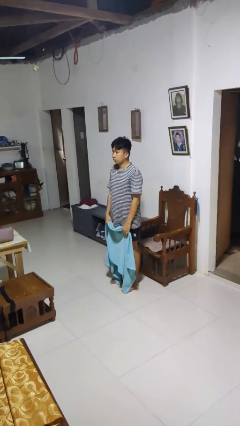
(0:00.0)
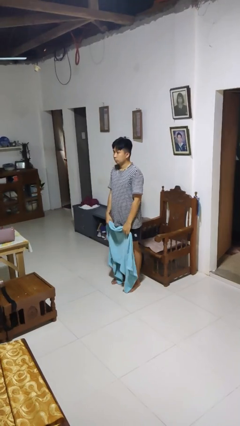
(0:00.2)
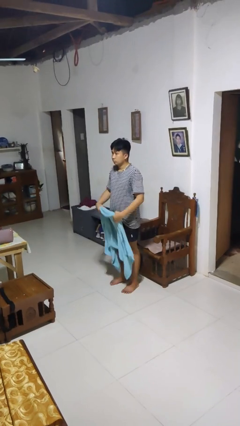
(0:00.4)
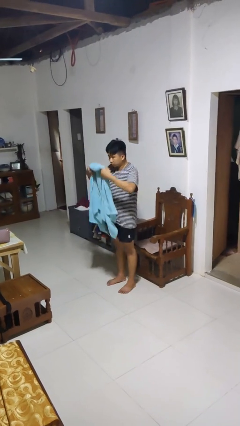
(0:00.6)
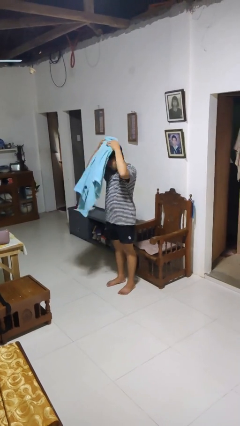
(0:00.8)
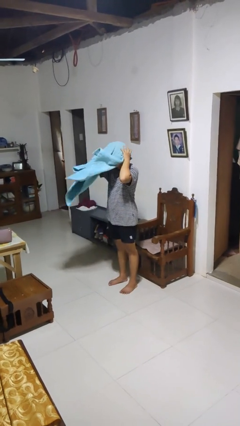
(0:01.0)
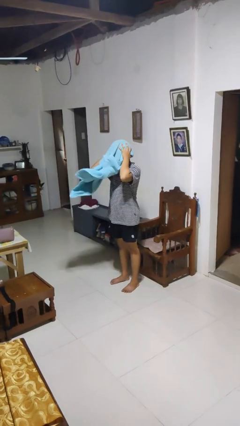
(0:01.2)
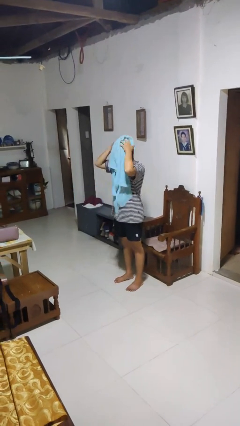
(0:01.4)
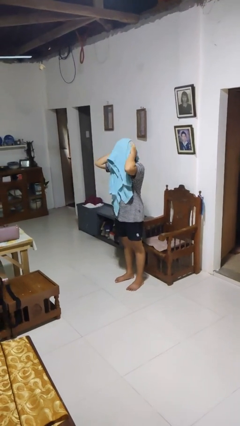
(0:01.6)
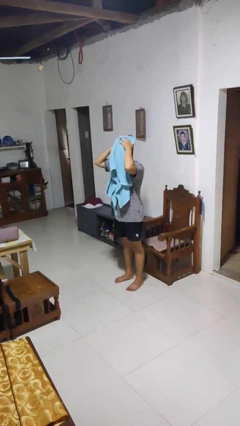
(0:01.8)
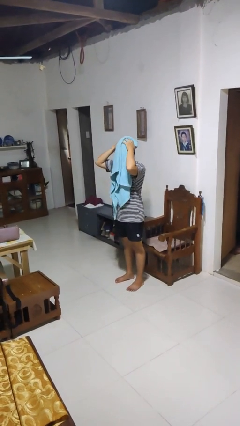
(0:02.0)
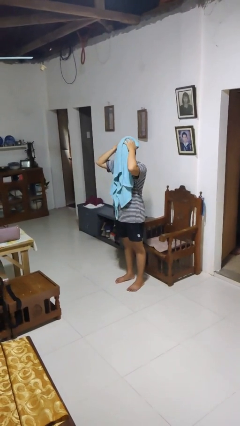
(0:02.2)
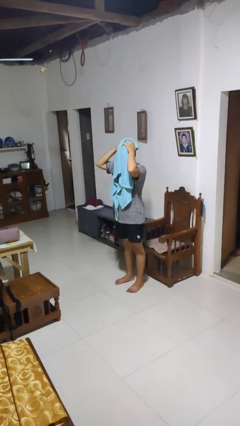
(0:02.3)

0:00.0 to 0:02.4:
person dries hair with towel

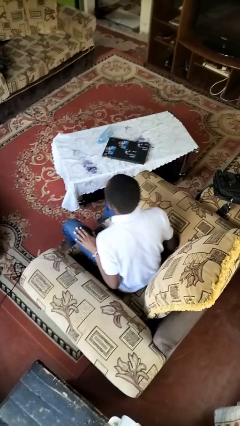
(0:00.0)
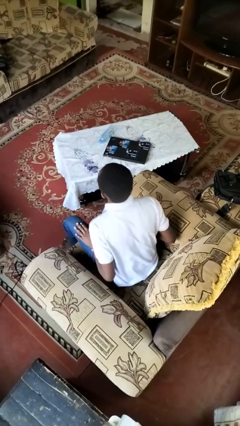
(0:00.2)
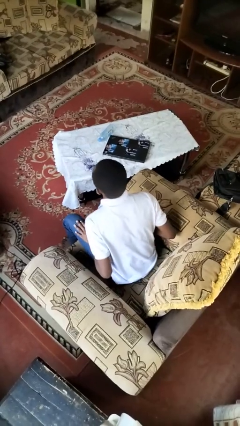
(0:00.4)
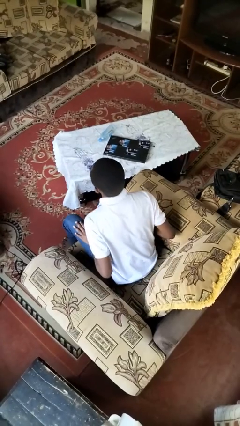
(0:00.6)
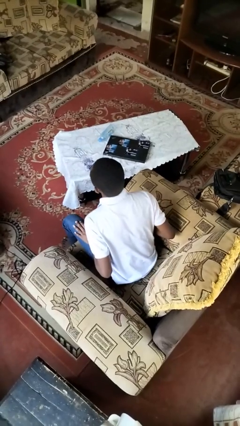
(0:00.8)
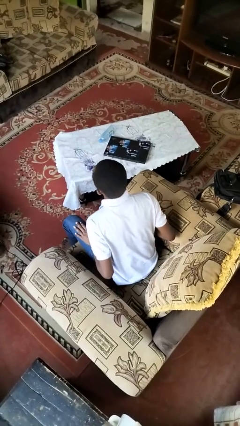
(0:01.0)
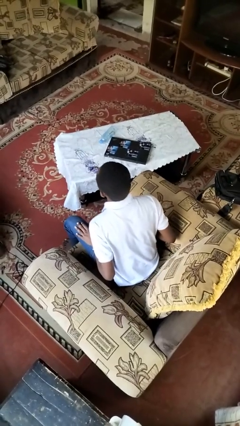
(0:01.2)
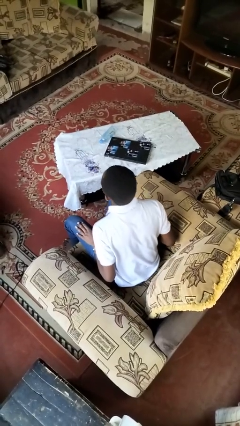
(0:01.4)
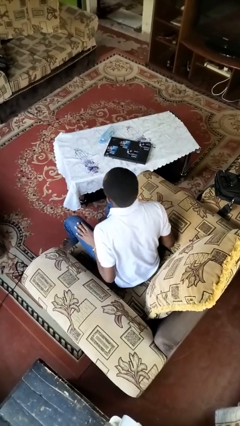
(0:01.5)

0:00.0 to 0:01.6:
person slaps hands on thighs

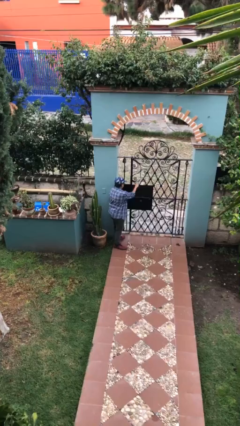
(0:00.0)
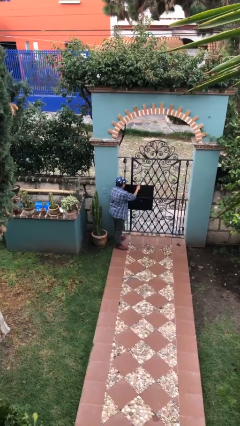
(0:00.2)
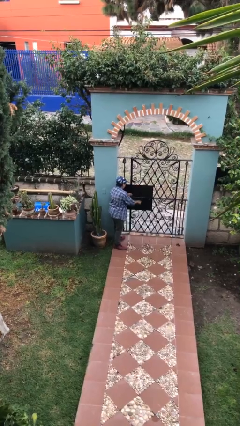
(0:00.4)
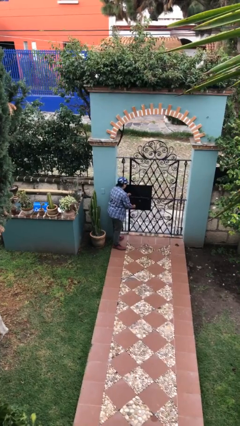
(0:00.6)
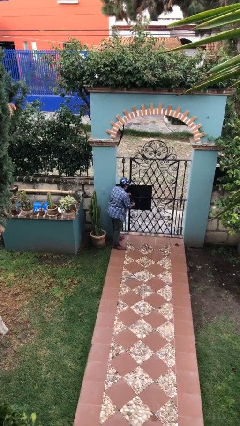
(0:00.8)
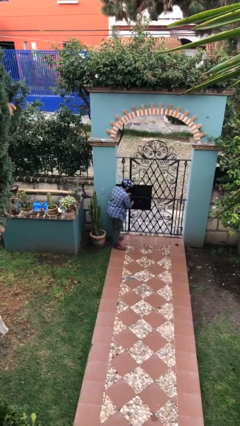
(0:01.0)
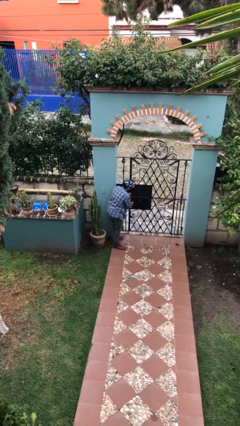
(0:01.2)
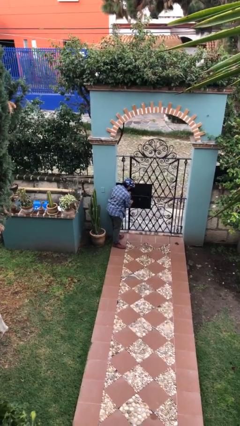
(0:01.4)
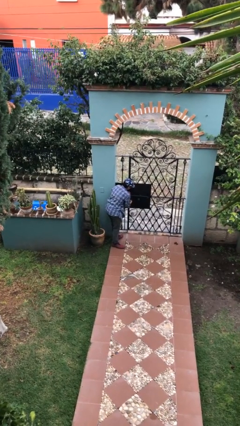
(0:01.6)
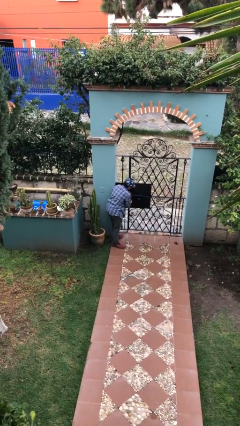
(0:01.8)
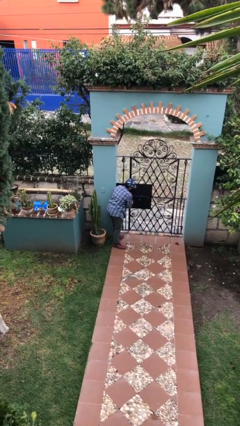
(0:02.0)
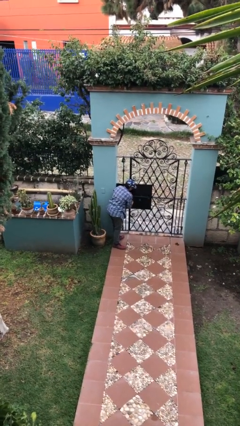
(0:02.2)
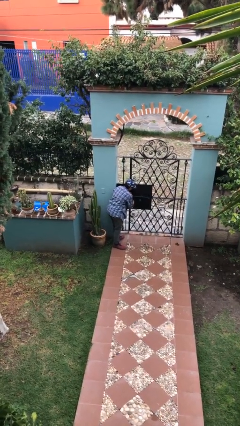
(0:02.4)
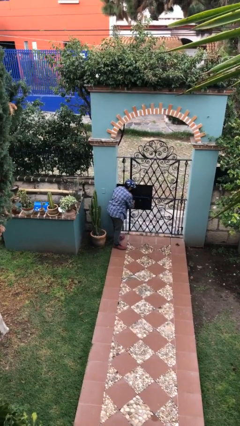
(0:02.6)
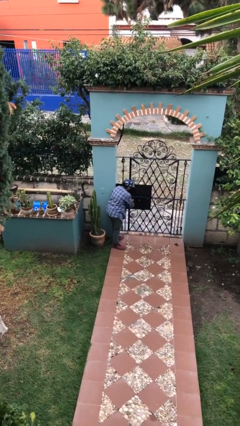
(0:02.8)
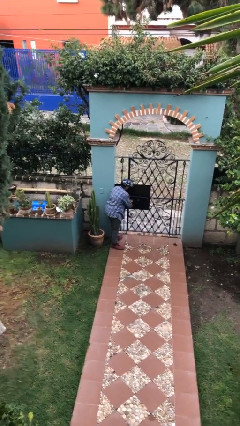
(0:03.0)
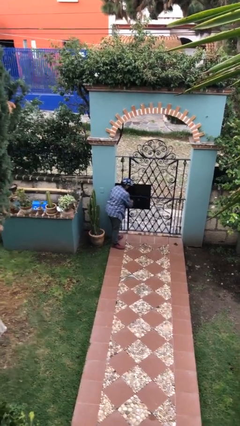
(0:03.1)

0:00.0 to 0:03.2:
person locks door with keys

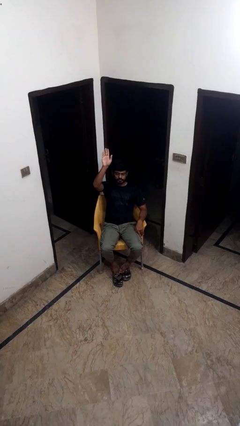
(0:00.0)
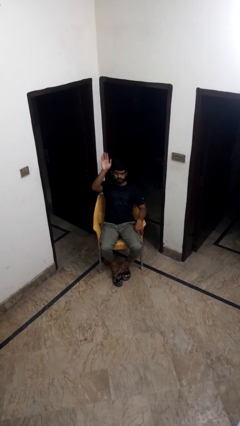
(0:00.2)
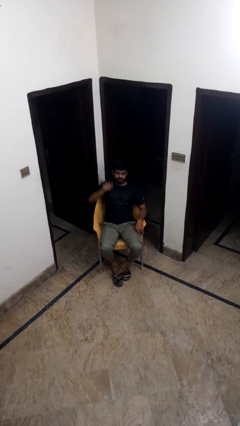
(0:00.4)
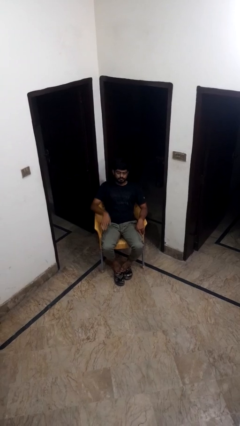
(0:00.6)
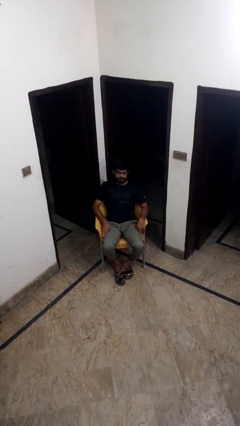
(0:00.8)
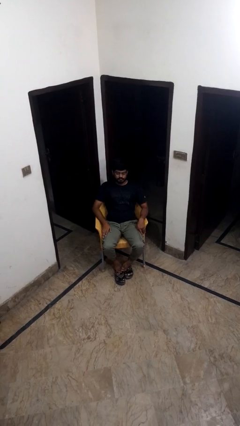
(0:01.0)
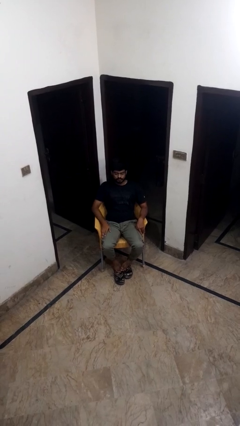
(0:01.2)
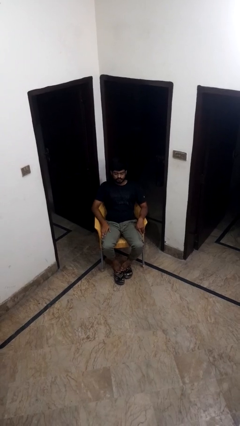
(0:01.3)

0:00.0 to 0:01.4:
person gestures lower hand

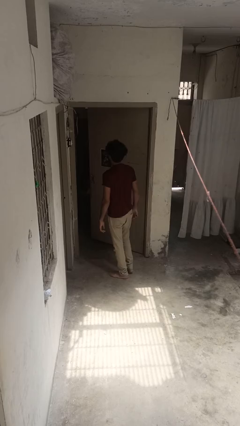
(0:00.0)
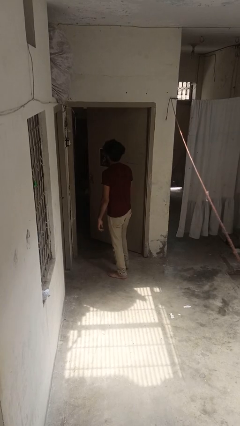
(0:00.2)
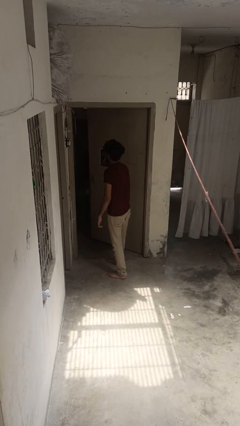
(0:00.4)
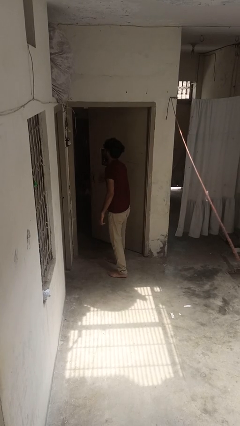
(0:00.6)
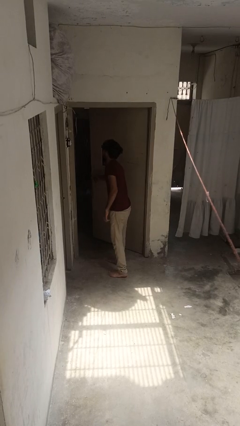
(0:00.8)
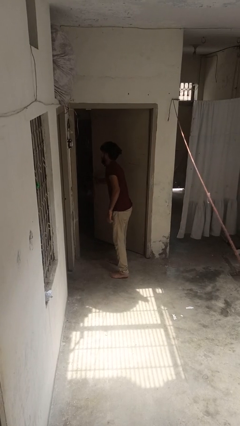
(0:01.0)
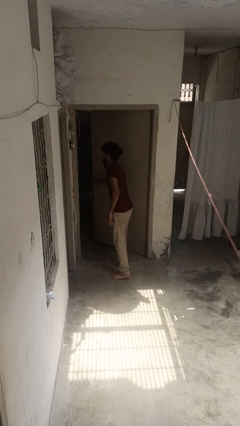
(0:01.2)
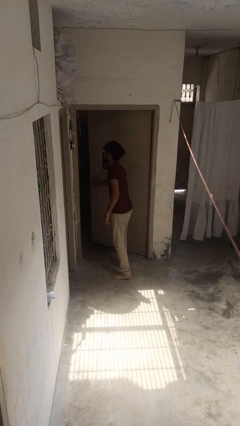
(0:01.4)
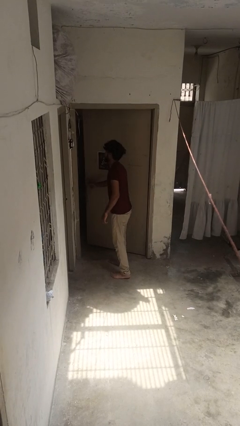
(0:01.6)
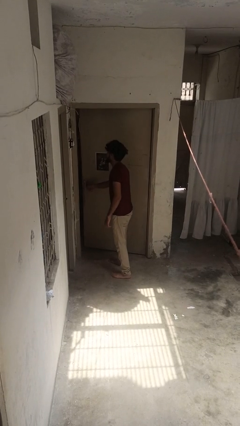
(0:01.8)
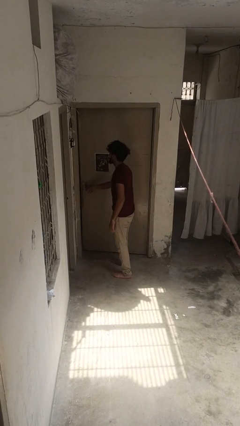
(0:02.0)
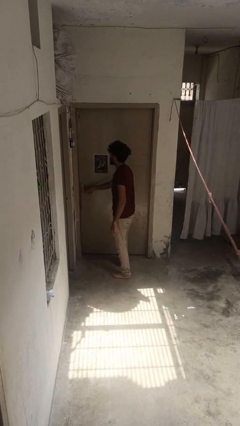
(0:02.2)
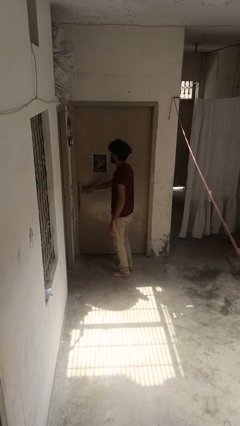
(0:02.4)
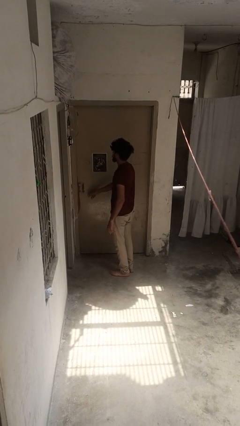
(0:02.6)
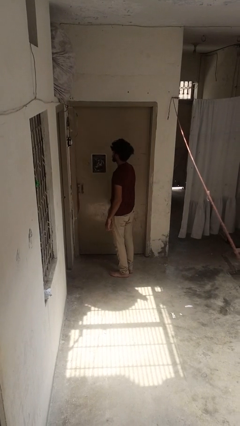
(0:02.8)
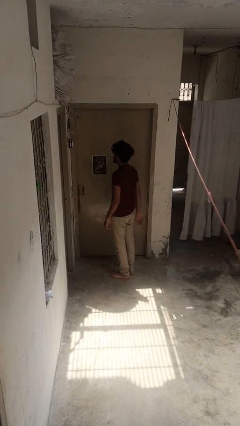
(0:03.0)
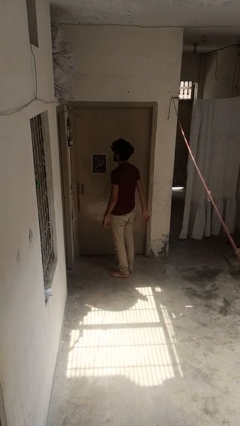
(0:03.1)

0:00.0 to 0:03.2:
person closes door with foot

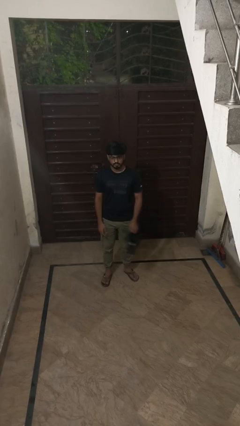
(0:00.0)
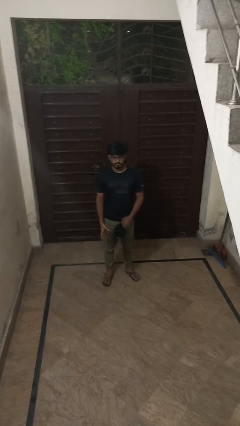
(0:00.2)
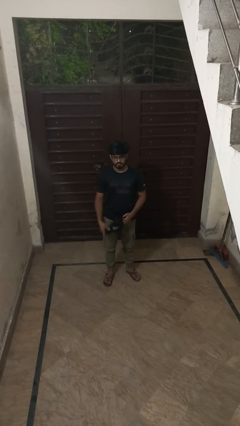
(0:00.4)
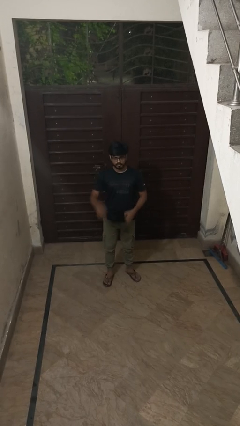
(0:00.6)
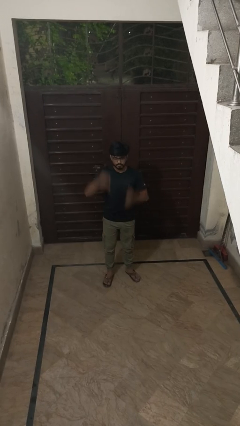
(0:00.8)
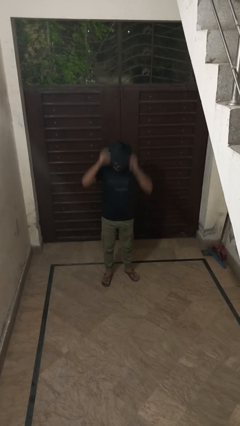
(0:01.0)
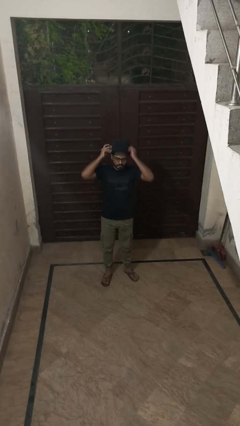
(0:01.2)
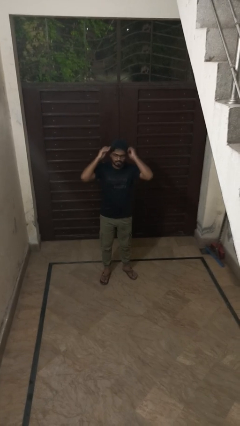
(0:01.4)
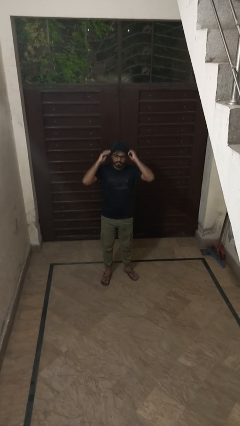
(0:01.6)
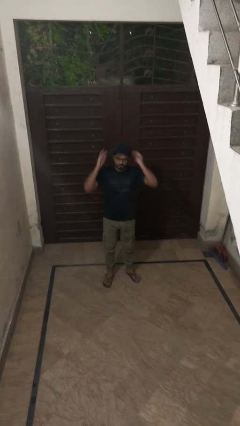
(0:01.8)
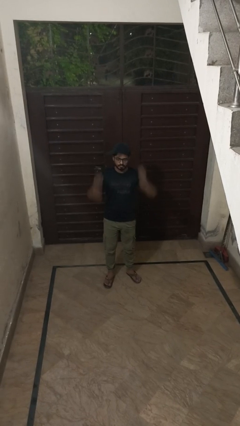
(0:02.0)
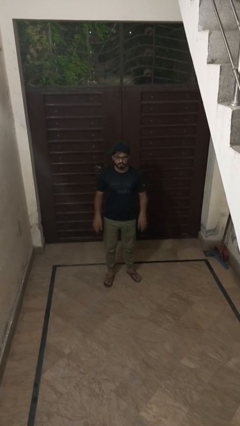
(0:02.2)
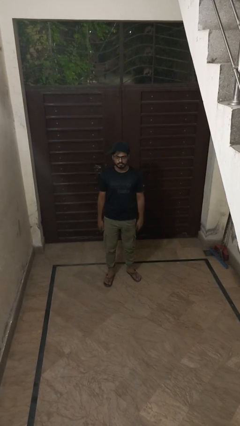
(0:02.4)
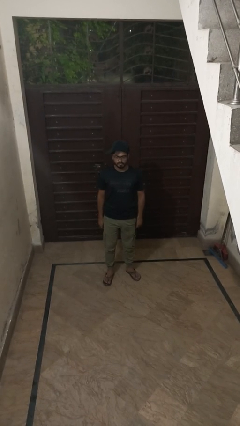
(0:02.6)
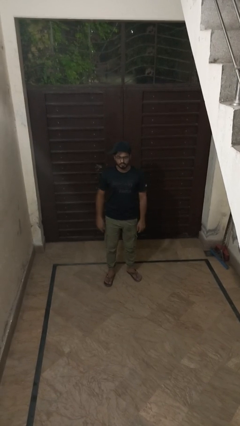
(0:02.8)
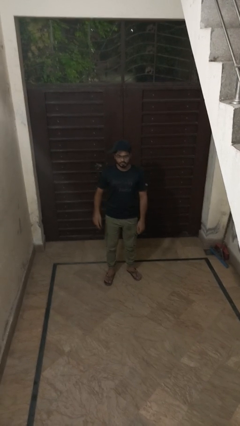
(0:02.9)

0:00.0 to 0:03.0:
person puts on hat

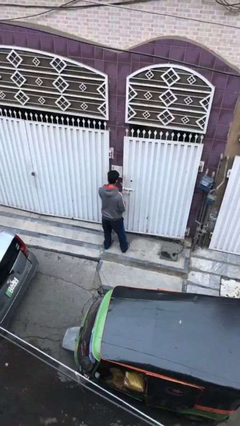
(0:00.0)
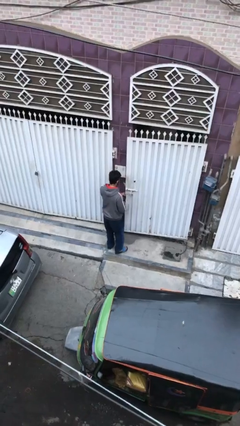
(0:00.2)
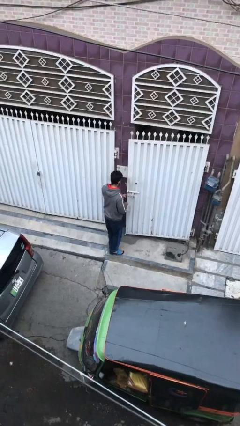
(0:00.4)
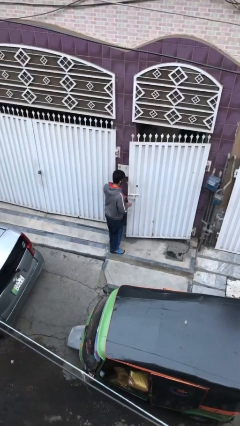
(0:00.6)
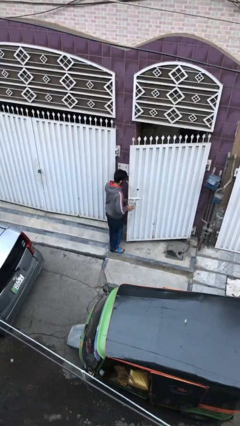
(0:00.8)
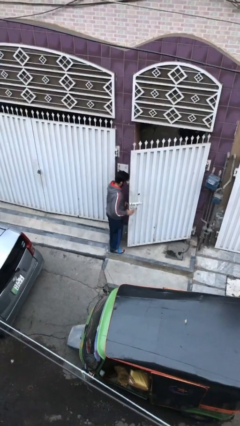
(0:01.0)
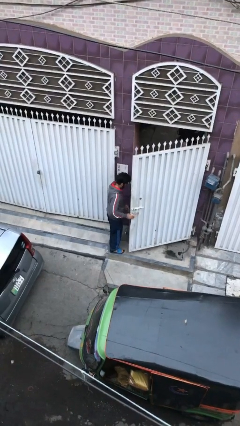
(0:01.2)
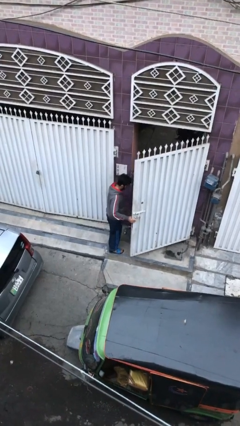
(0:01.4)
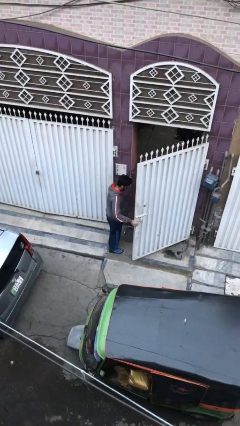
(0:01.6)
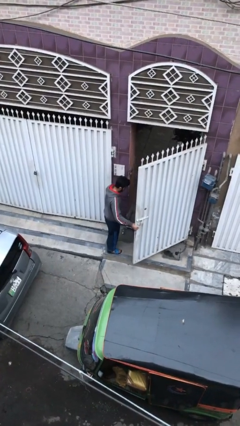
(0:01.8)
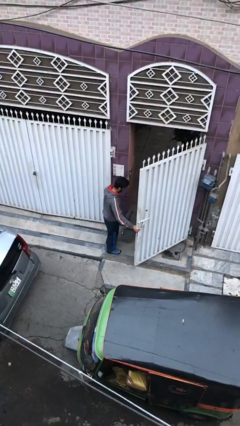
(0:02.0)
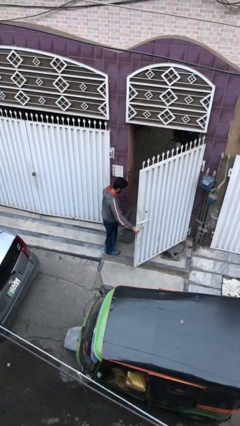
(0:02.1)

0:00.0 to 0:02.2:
person opens facility door

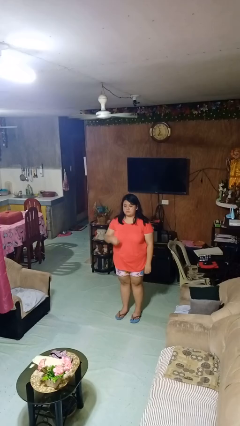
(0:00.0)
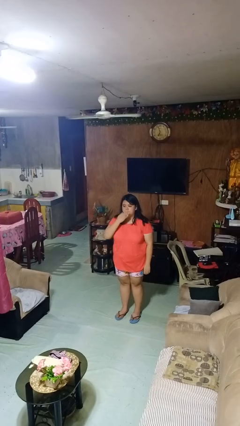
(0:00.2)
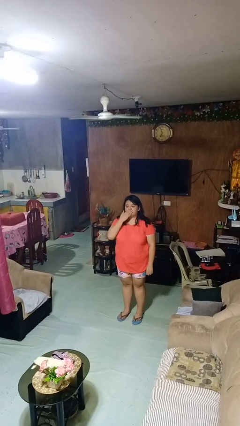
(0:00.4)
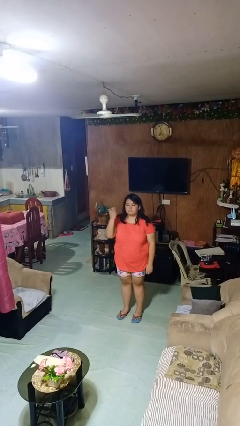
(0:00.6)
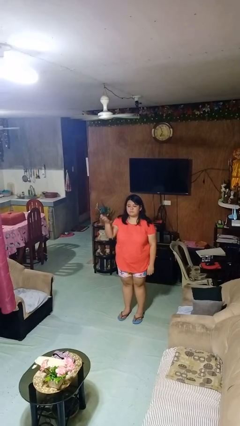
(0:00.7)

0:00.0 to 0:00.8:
person gestures blow kiss
